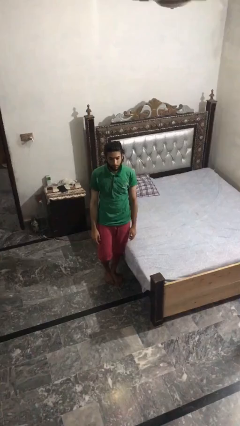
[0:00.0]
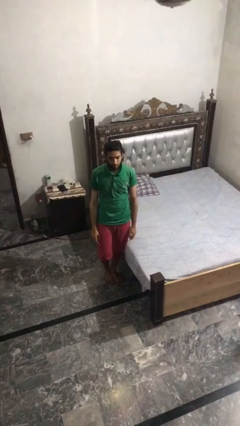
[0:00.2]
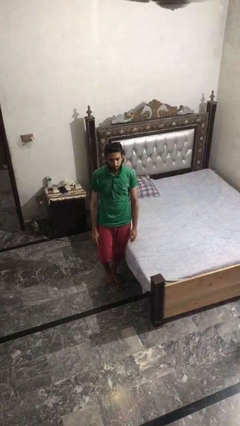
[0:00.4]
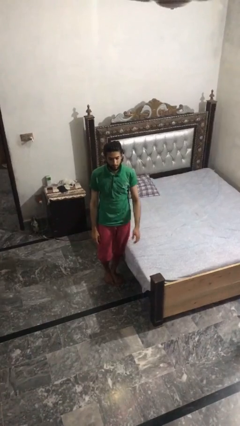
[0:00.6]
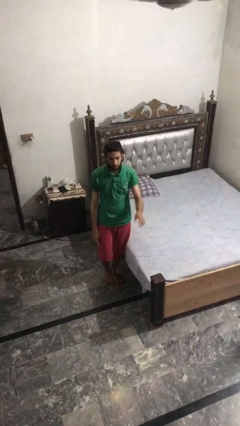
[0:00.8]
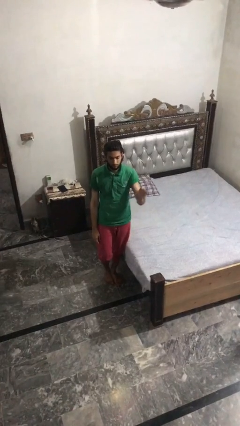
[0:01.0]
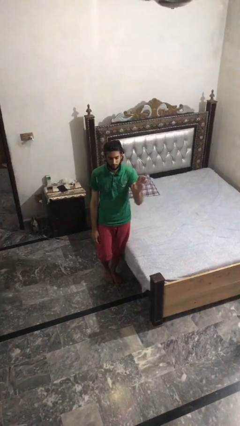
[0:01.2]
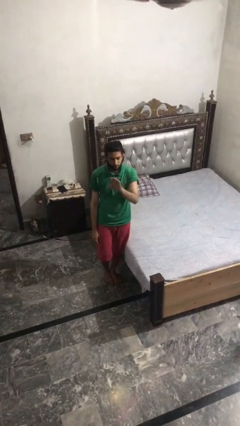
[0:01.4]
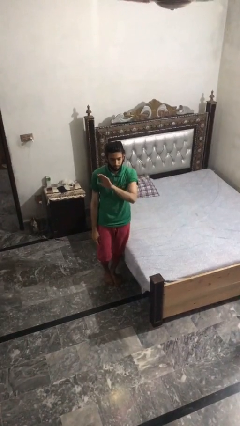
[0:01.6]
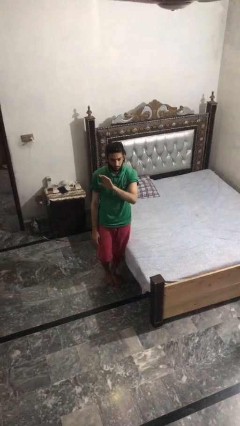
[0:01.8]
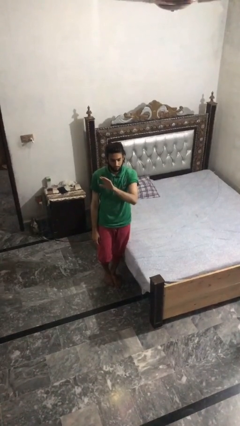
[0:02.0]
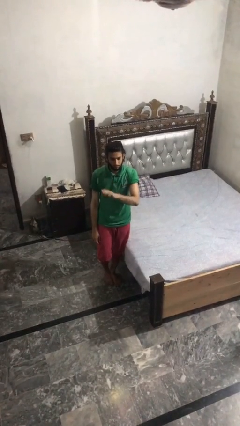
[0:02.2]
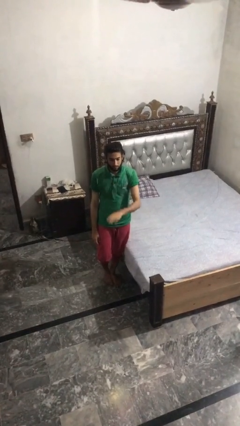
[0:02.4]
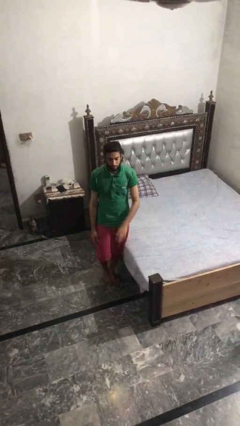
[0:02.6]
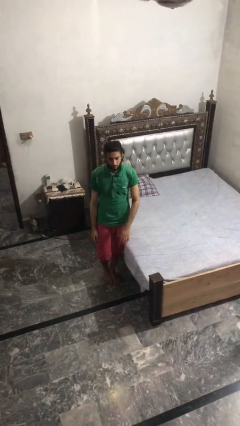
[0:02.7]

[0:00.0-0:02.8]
person gestures swipe left

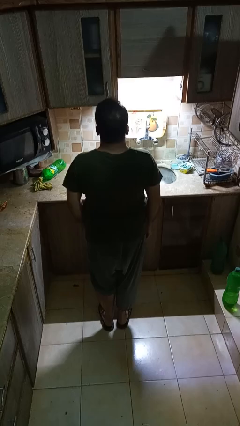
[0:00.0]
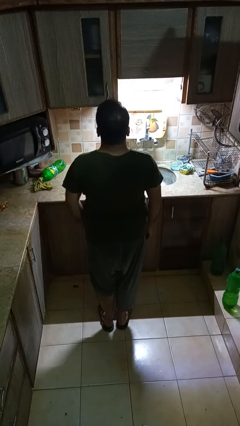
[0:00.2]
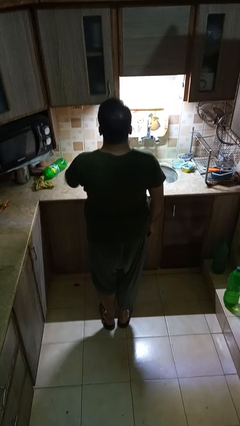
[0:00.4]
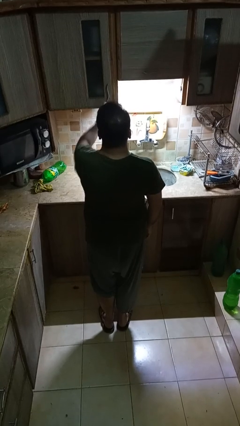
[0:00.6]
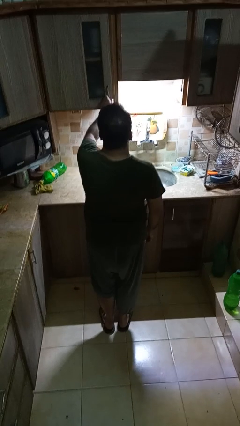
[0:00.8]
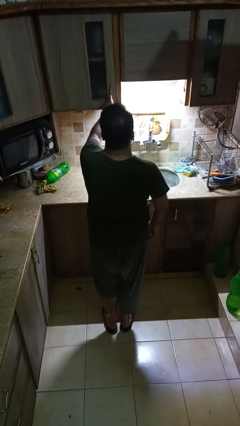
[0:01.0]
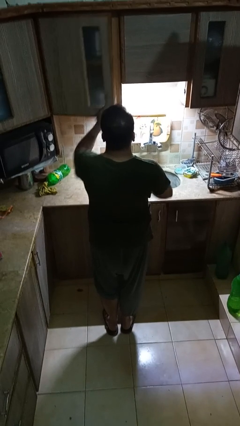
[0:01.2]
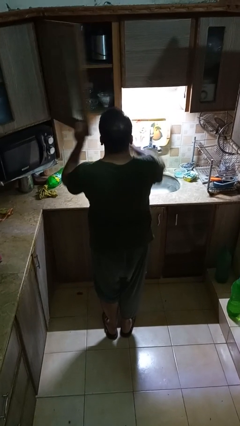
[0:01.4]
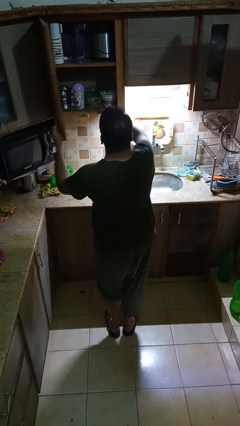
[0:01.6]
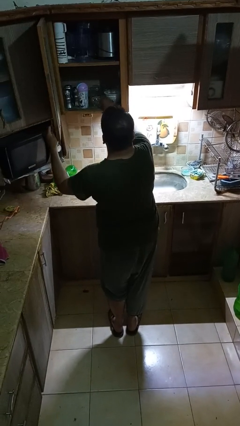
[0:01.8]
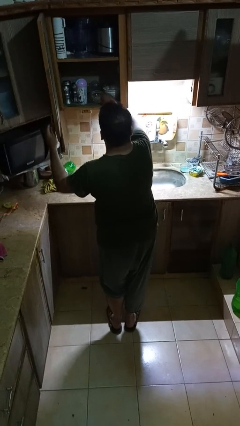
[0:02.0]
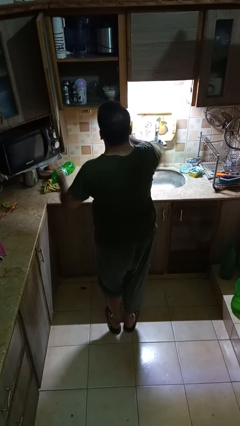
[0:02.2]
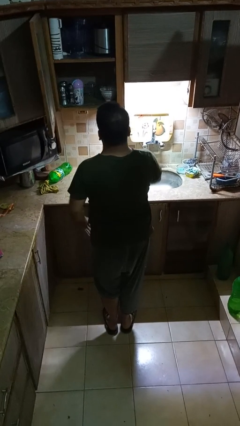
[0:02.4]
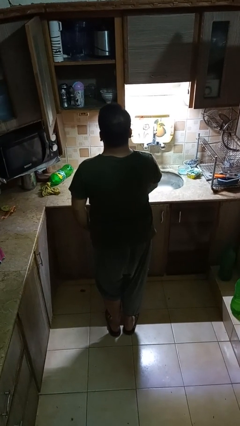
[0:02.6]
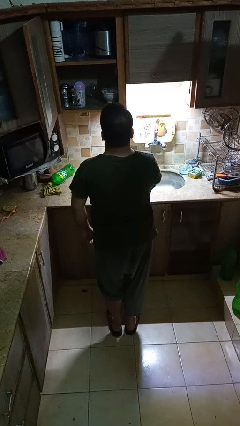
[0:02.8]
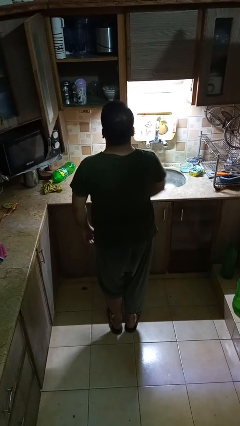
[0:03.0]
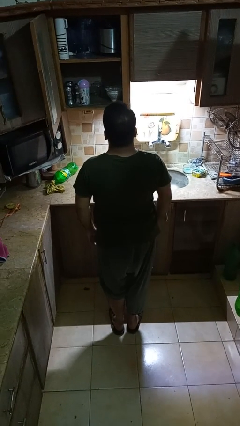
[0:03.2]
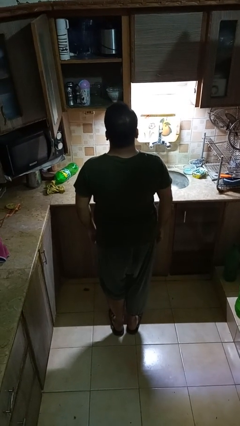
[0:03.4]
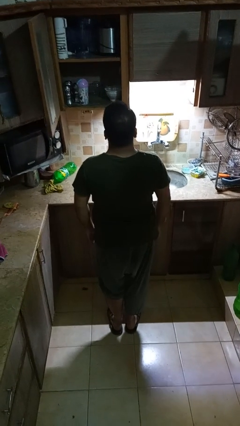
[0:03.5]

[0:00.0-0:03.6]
person takes object from cabinet

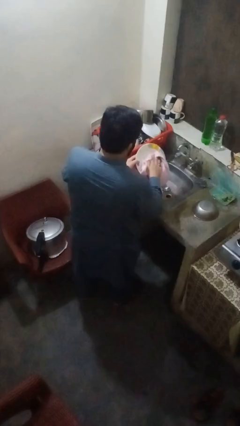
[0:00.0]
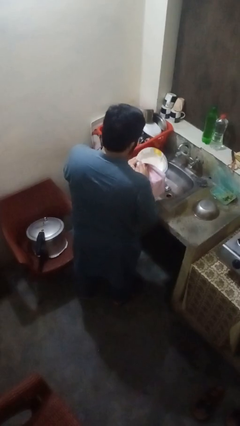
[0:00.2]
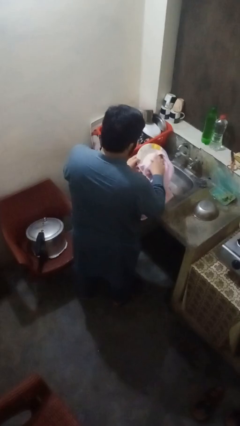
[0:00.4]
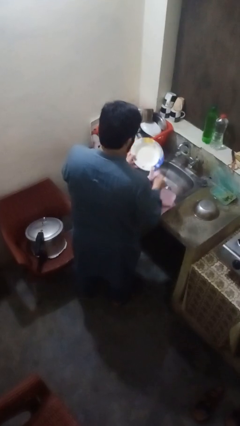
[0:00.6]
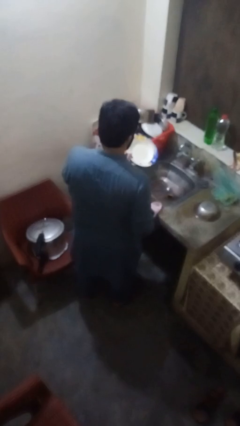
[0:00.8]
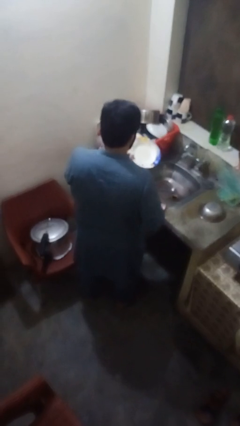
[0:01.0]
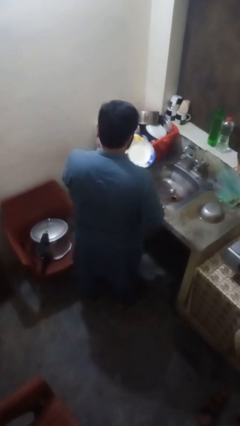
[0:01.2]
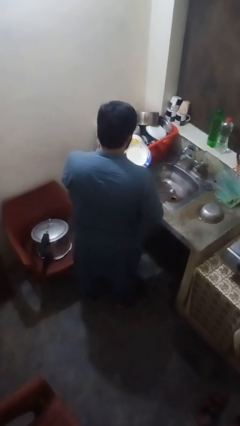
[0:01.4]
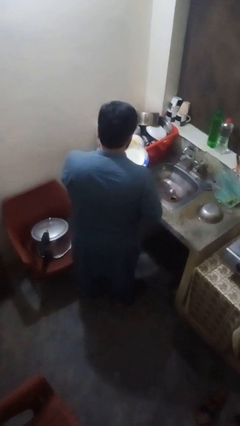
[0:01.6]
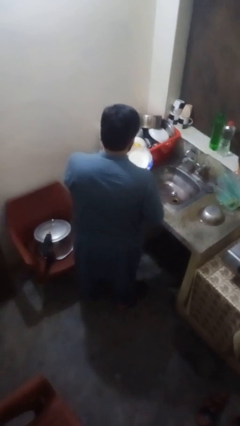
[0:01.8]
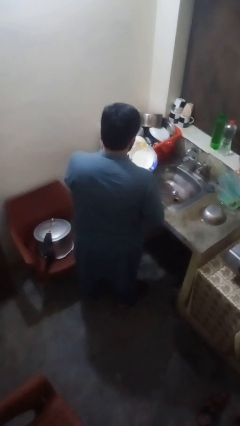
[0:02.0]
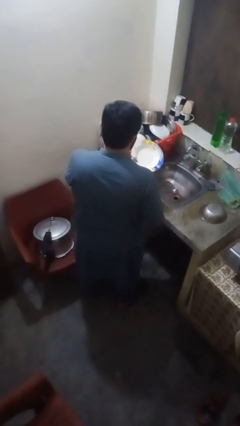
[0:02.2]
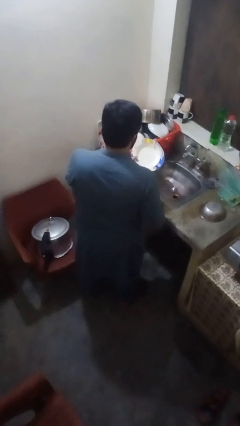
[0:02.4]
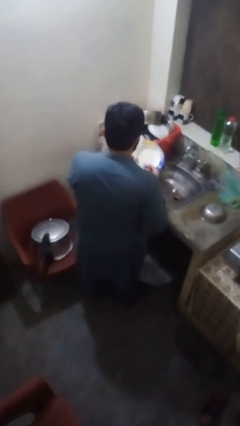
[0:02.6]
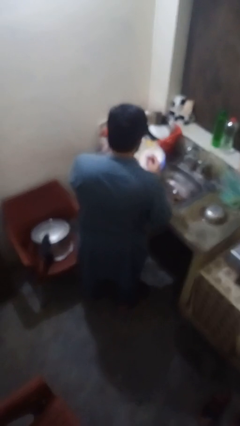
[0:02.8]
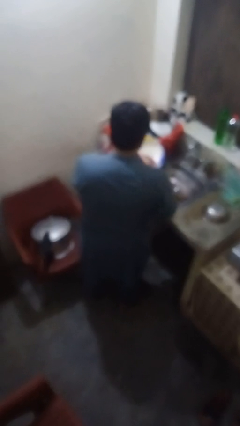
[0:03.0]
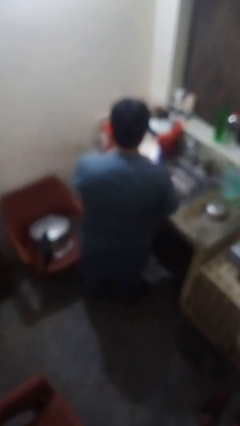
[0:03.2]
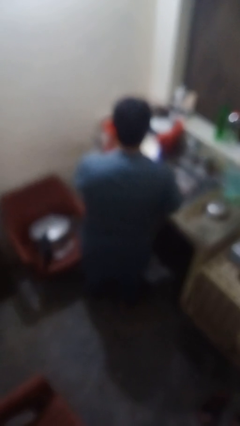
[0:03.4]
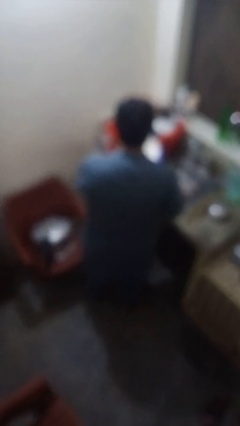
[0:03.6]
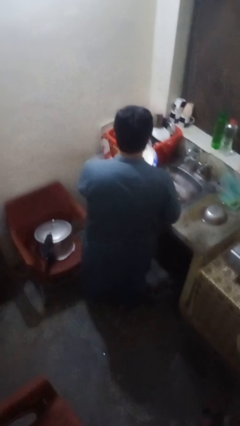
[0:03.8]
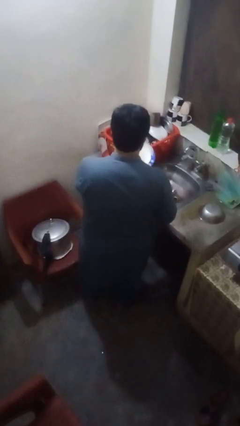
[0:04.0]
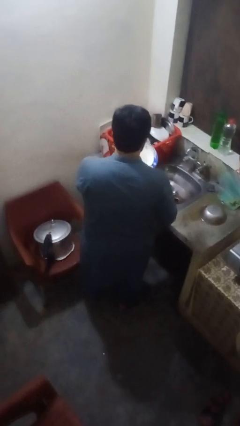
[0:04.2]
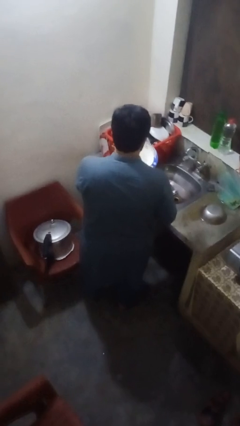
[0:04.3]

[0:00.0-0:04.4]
person dries dish

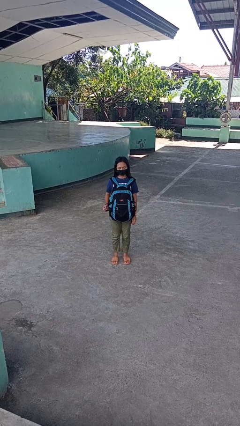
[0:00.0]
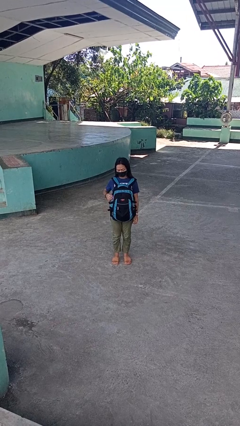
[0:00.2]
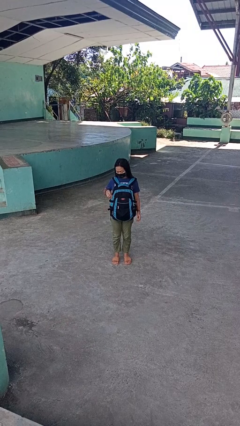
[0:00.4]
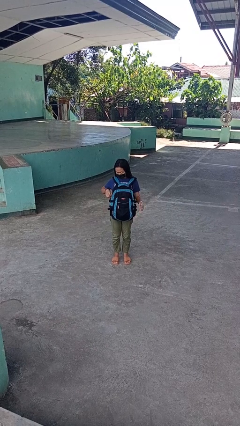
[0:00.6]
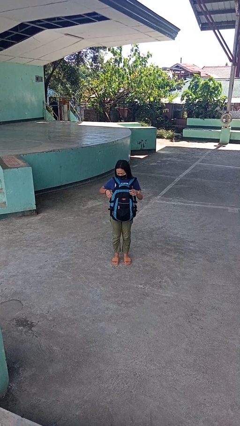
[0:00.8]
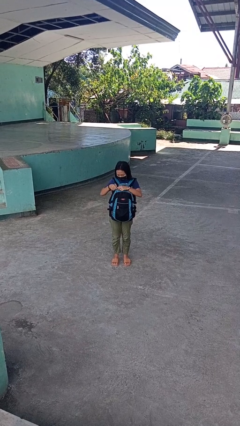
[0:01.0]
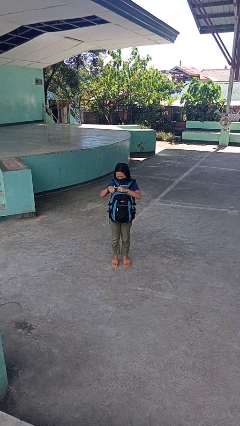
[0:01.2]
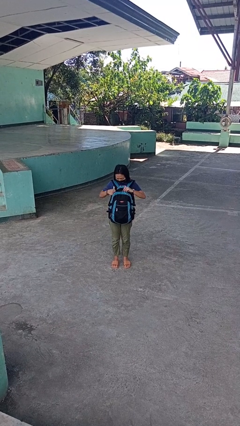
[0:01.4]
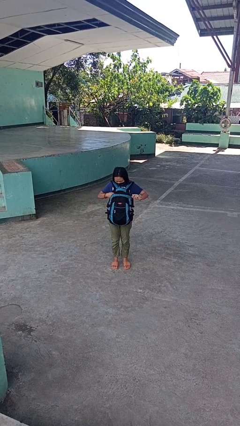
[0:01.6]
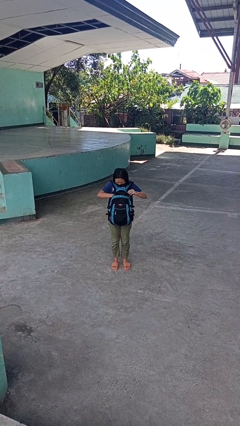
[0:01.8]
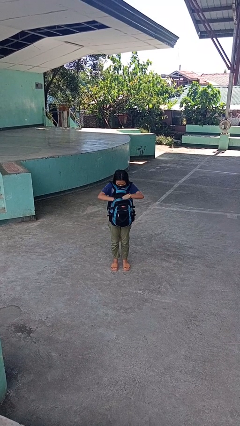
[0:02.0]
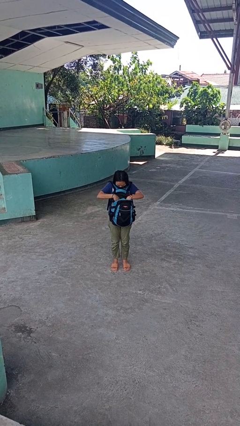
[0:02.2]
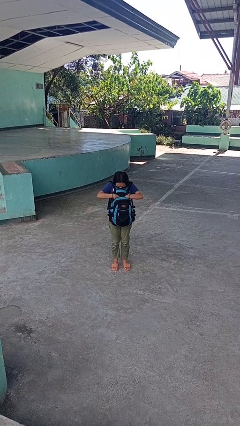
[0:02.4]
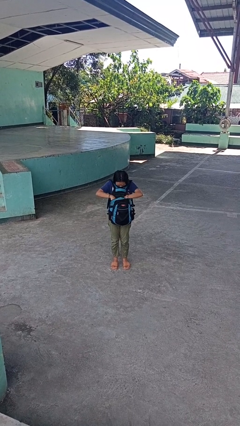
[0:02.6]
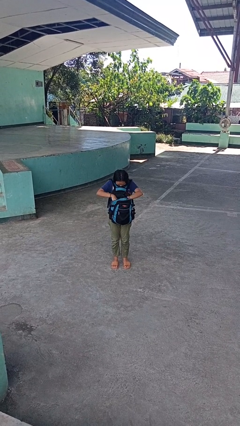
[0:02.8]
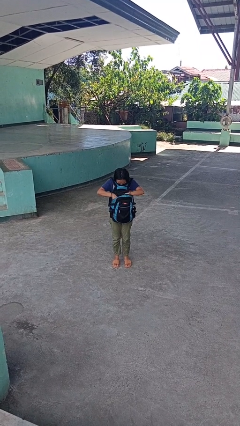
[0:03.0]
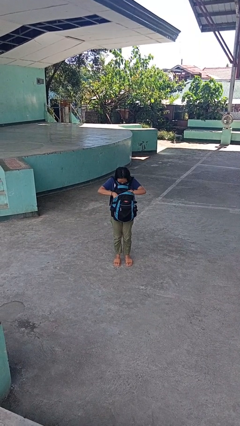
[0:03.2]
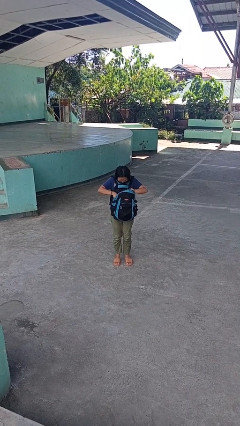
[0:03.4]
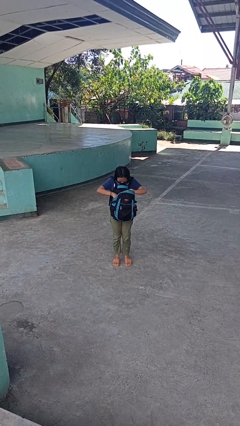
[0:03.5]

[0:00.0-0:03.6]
person searches in backpack

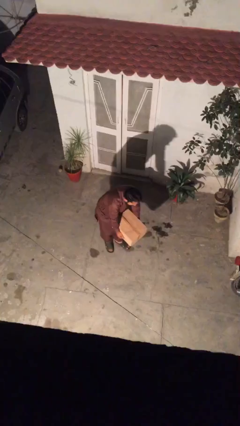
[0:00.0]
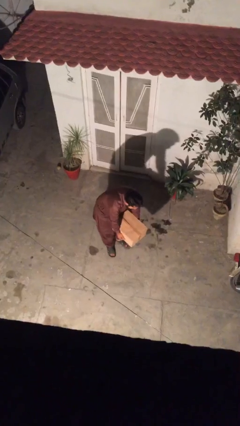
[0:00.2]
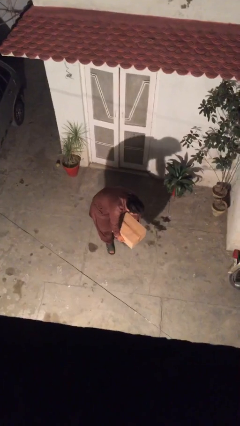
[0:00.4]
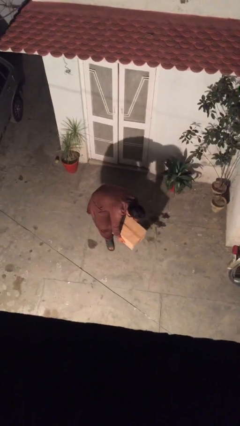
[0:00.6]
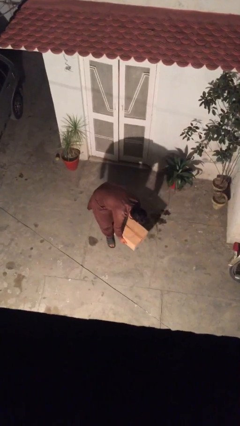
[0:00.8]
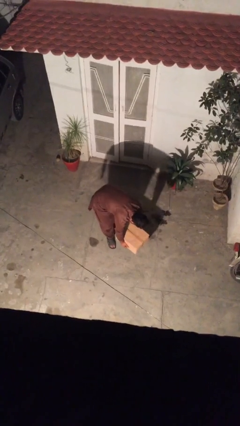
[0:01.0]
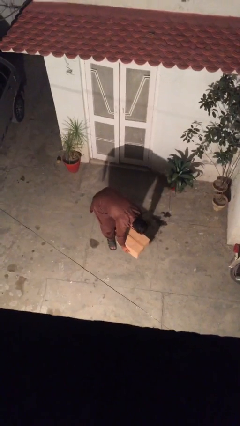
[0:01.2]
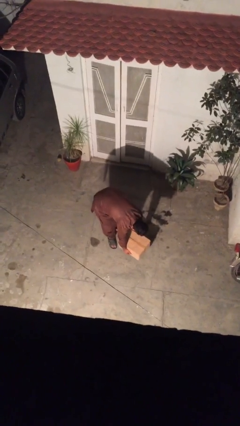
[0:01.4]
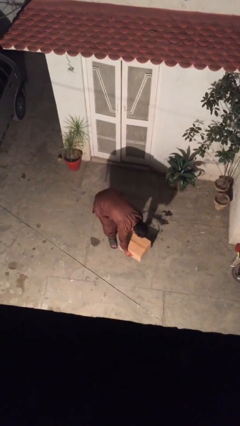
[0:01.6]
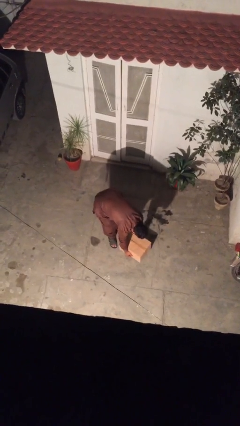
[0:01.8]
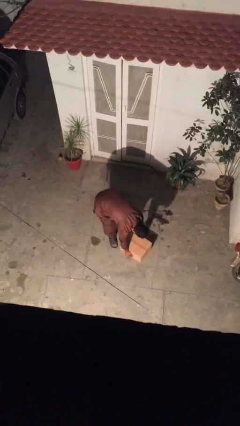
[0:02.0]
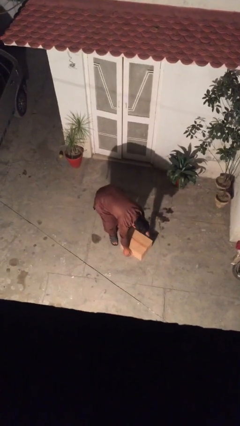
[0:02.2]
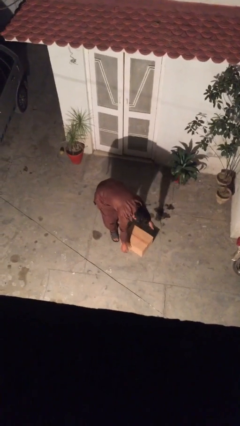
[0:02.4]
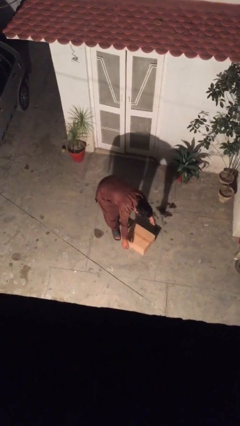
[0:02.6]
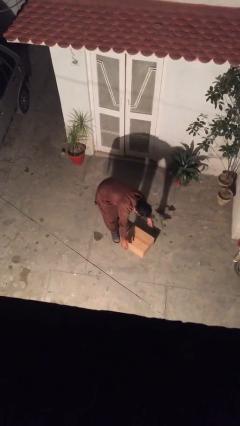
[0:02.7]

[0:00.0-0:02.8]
person puts down object on floor
